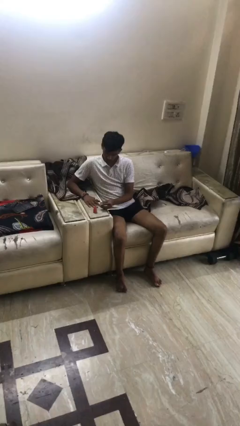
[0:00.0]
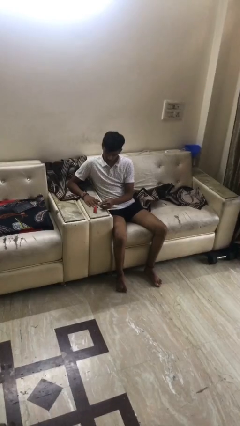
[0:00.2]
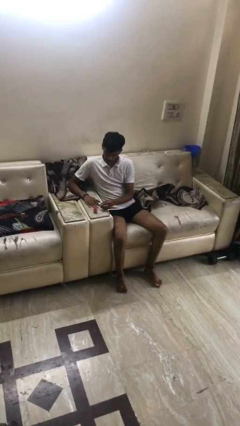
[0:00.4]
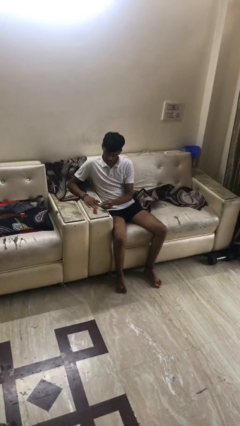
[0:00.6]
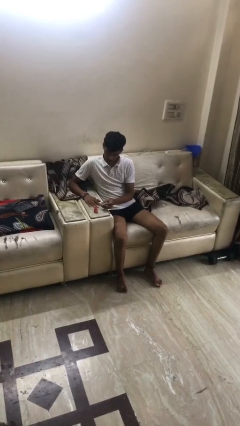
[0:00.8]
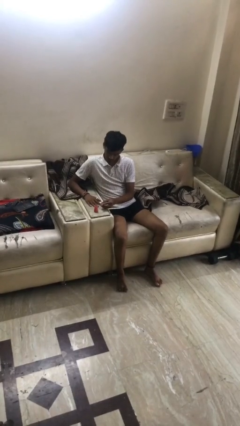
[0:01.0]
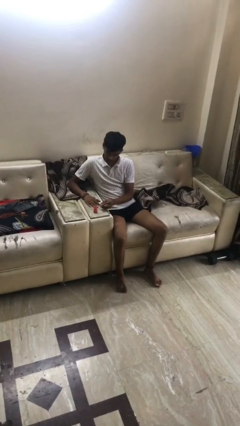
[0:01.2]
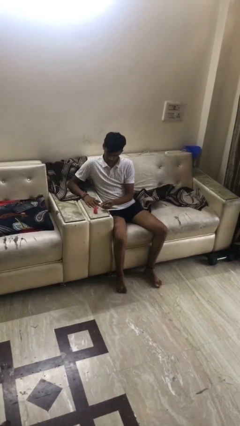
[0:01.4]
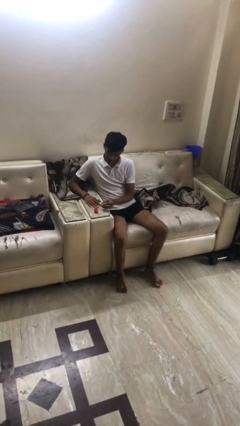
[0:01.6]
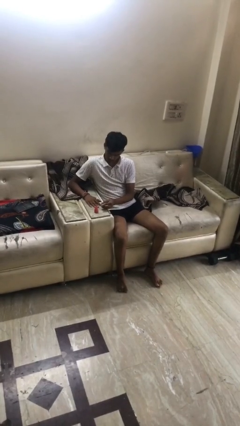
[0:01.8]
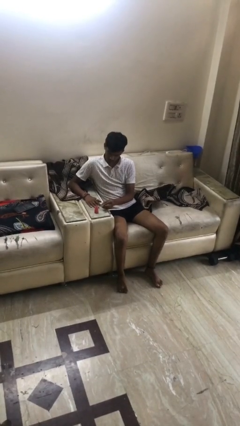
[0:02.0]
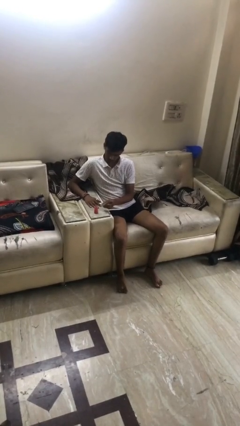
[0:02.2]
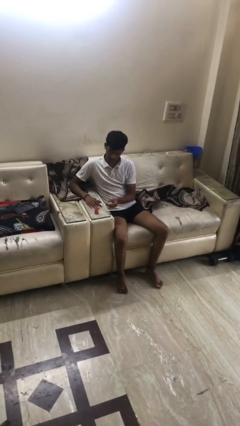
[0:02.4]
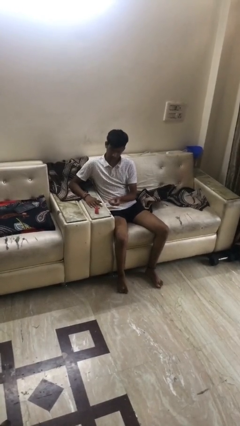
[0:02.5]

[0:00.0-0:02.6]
person paints fingernails

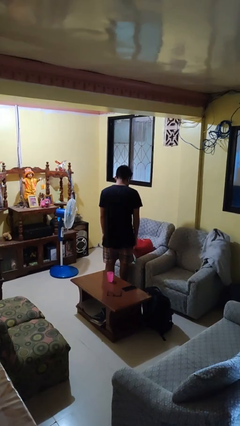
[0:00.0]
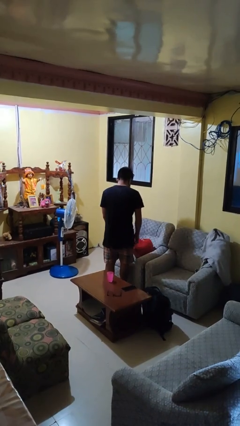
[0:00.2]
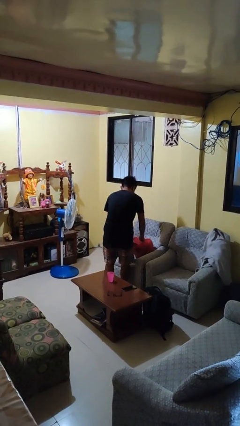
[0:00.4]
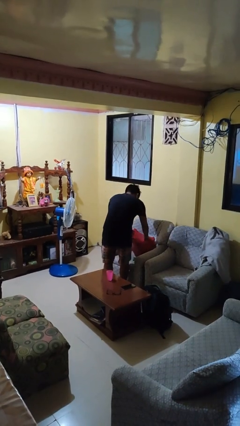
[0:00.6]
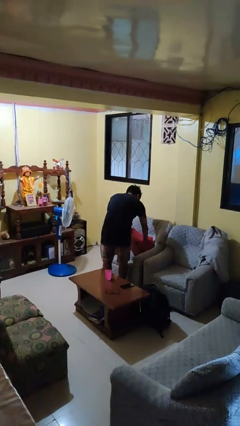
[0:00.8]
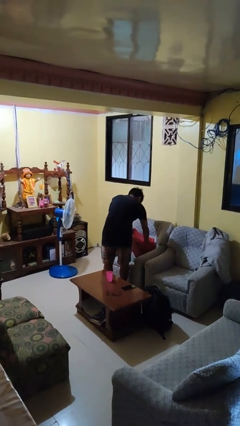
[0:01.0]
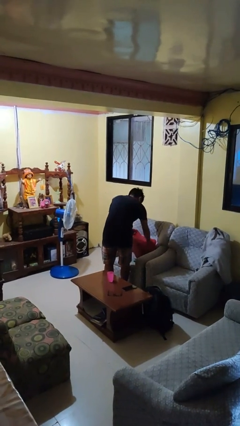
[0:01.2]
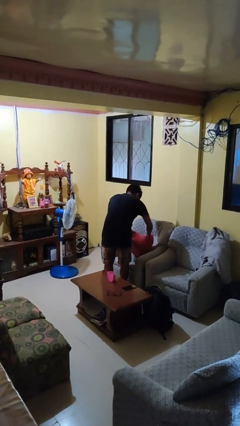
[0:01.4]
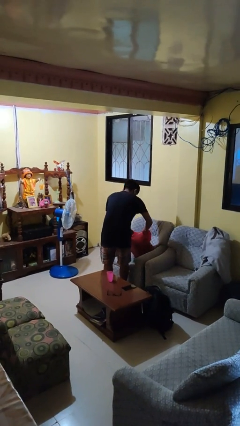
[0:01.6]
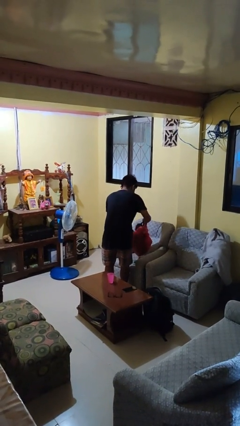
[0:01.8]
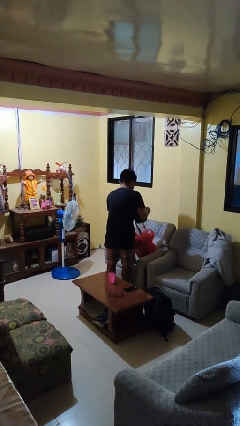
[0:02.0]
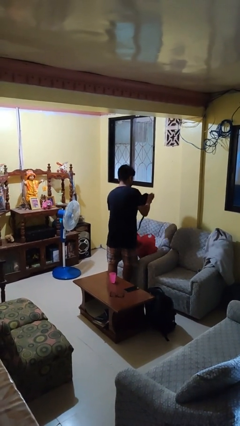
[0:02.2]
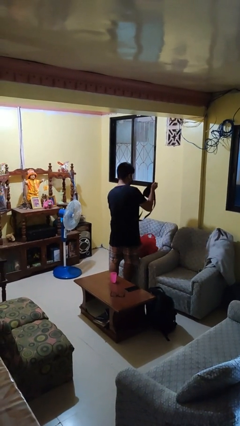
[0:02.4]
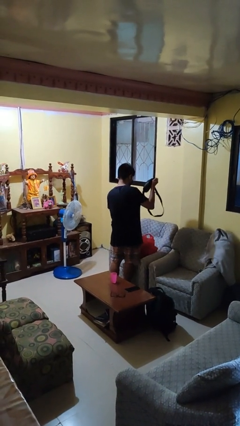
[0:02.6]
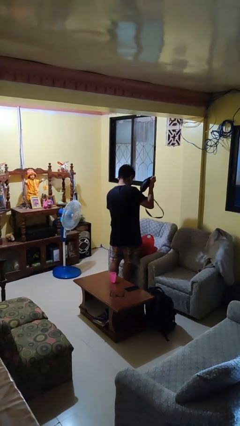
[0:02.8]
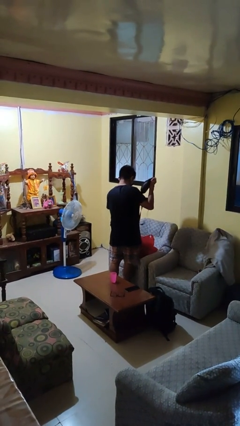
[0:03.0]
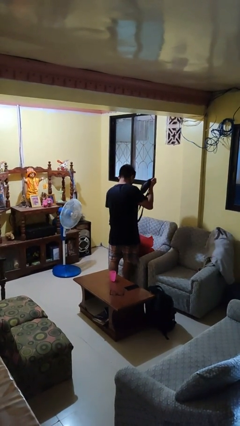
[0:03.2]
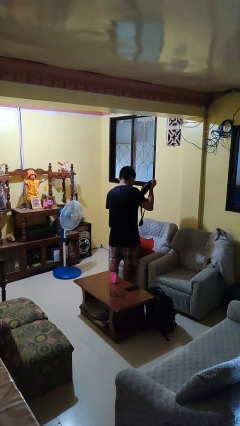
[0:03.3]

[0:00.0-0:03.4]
person takes object from bag

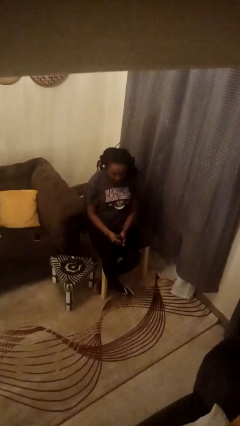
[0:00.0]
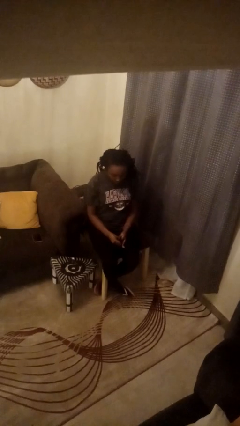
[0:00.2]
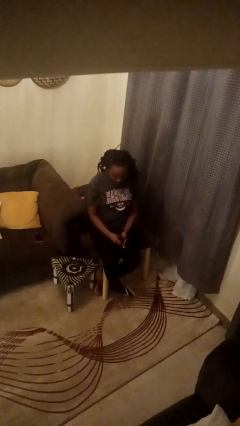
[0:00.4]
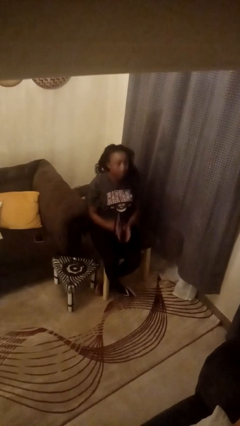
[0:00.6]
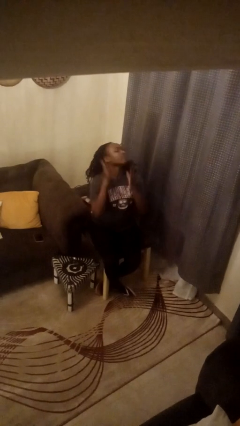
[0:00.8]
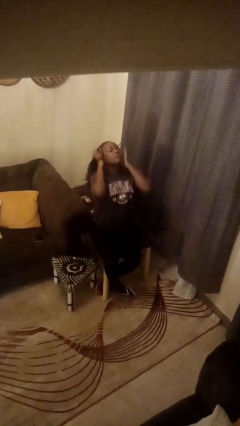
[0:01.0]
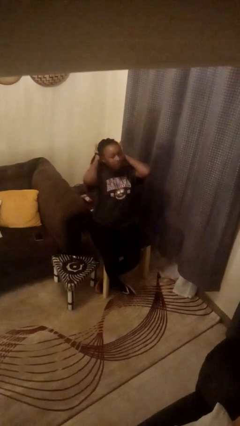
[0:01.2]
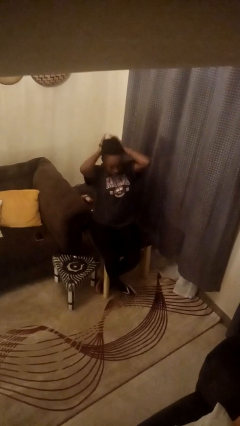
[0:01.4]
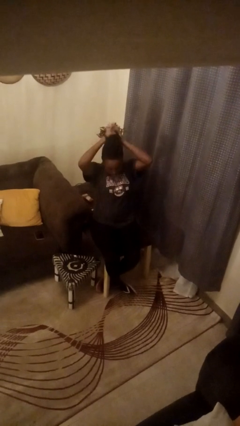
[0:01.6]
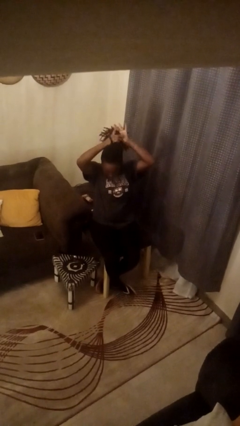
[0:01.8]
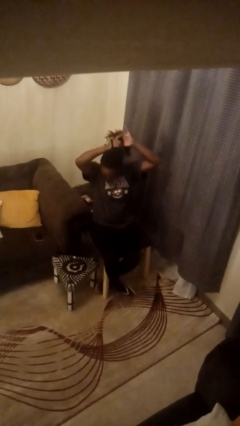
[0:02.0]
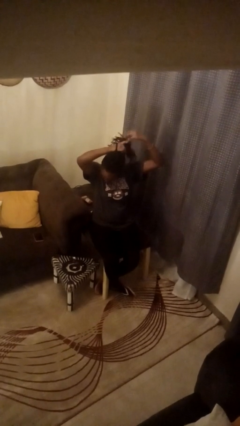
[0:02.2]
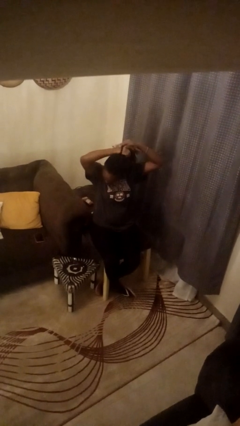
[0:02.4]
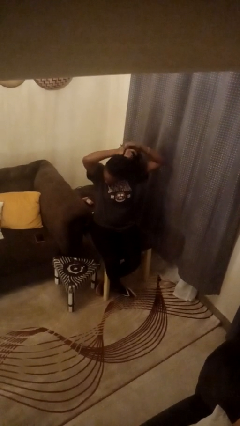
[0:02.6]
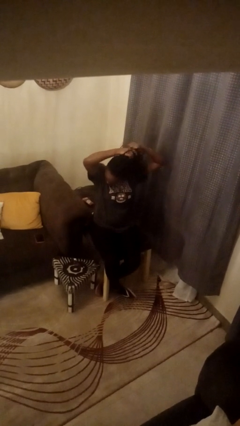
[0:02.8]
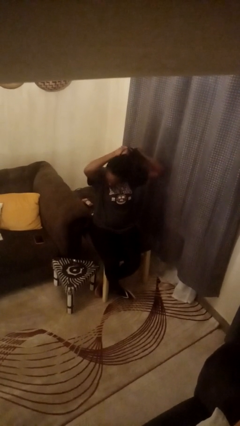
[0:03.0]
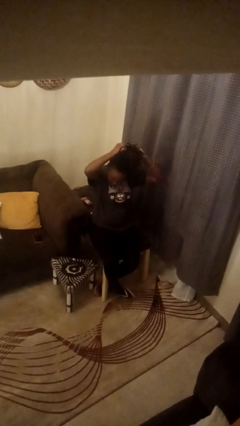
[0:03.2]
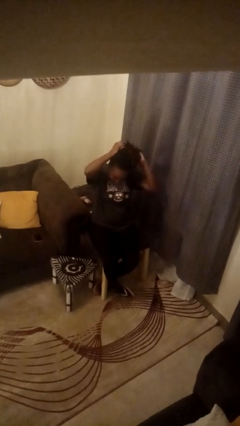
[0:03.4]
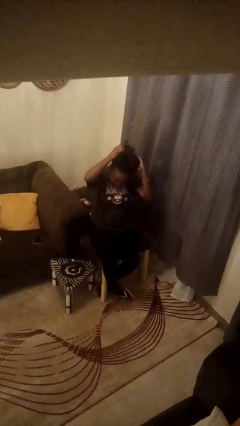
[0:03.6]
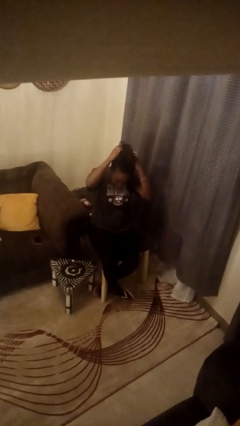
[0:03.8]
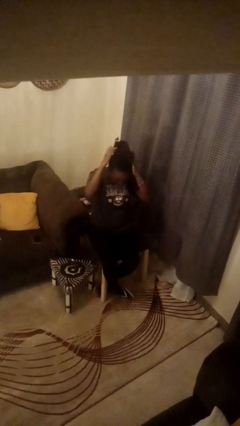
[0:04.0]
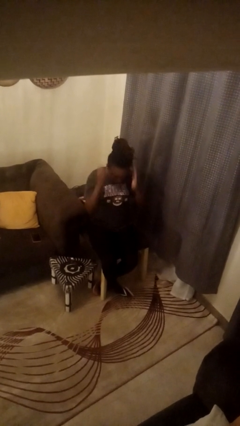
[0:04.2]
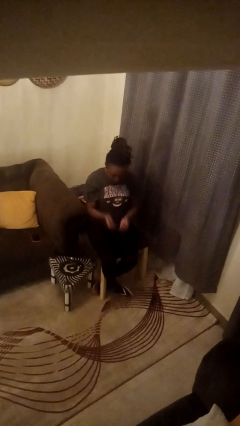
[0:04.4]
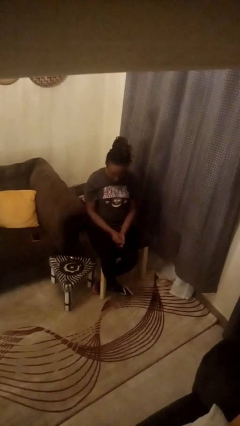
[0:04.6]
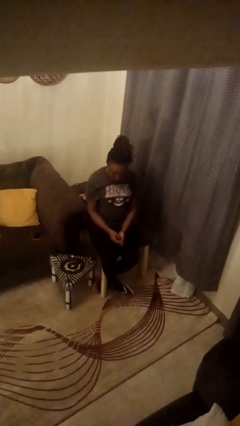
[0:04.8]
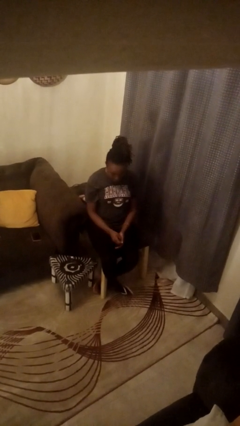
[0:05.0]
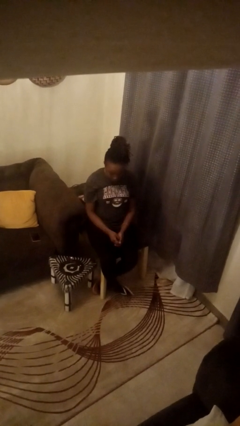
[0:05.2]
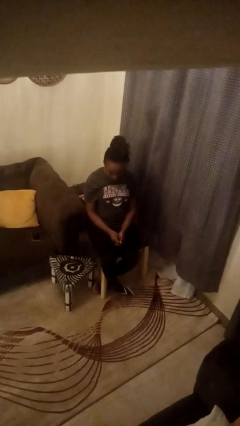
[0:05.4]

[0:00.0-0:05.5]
person puts hair in ponytail

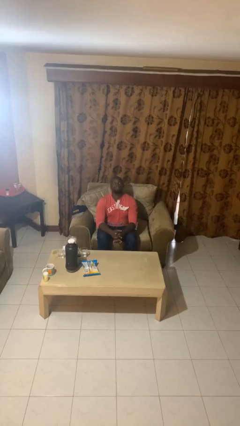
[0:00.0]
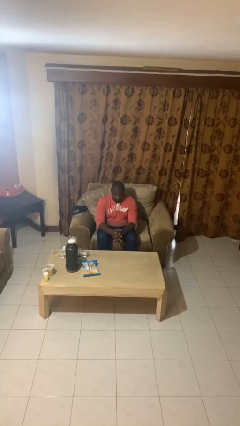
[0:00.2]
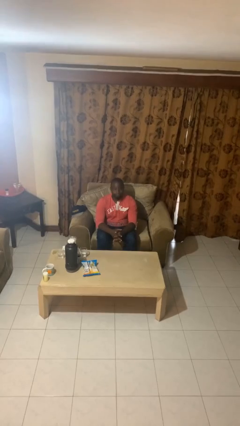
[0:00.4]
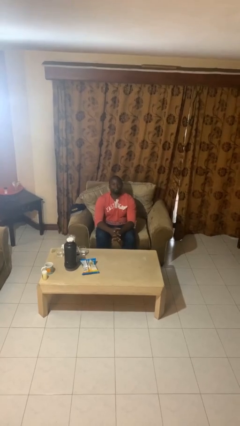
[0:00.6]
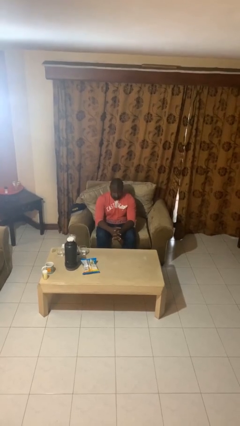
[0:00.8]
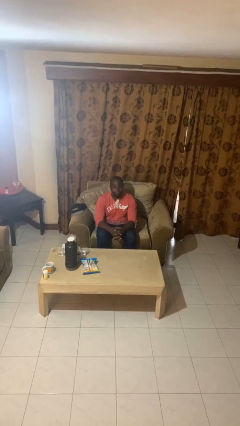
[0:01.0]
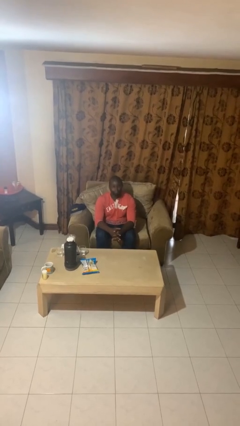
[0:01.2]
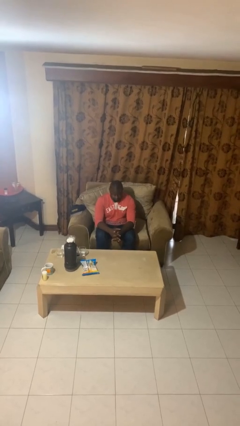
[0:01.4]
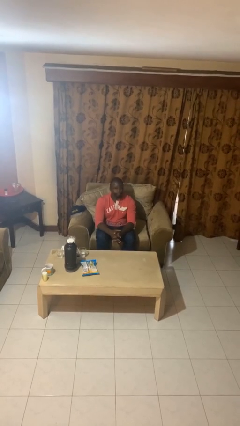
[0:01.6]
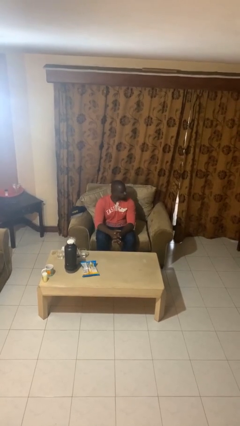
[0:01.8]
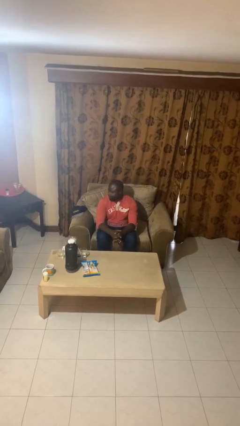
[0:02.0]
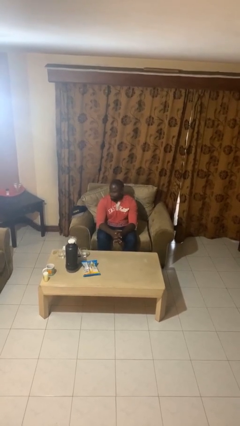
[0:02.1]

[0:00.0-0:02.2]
person nods head

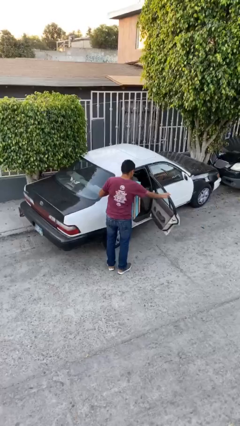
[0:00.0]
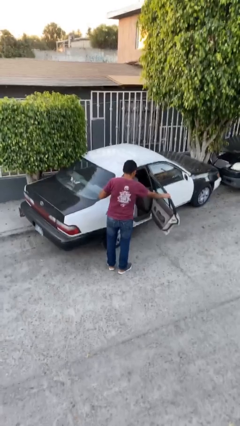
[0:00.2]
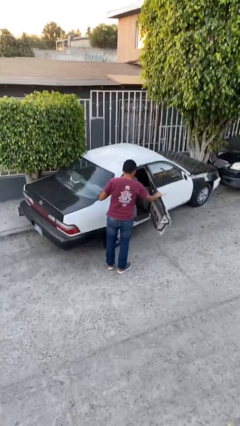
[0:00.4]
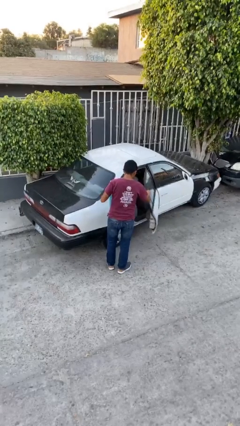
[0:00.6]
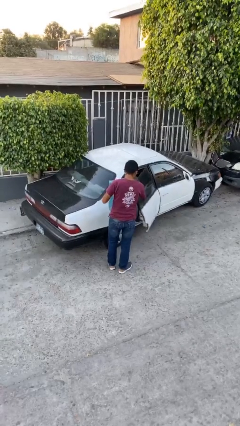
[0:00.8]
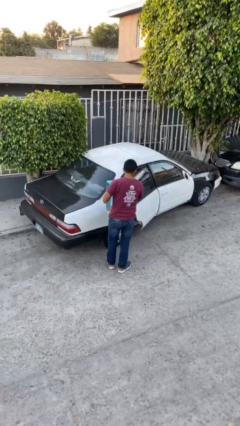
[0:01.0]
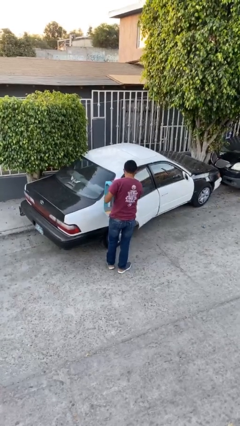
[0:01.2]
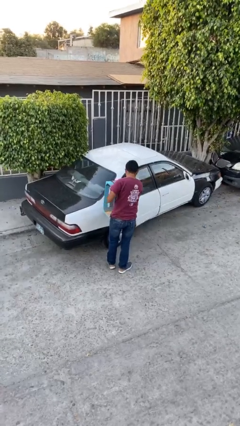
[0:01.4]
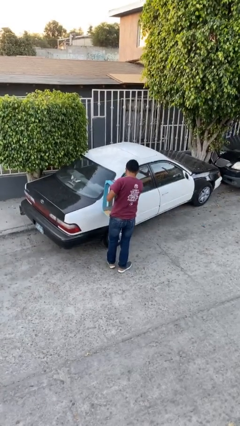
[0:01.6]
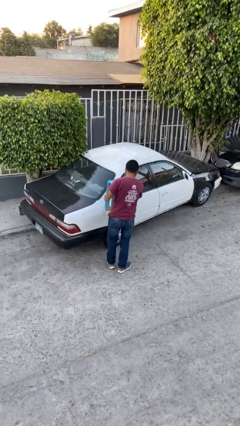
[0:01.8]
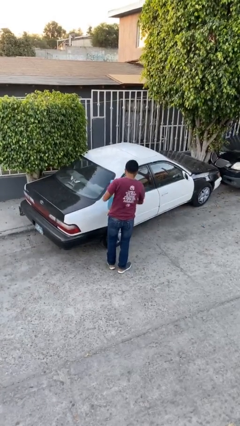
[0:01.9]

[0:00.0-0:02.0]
person closes car door

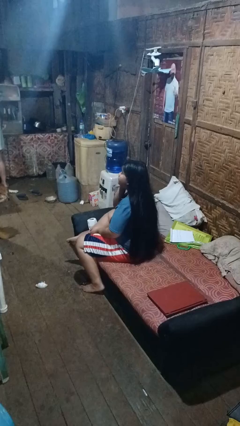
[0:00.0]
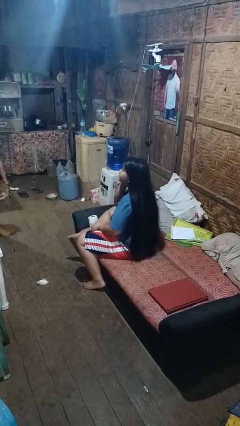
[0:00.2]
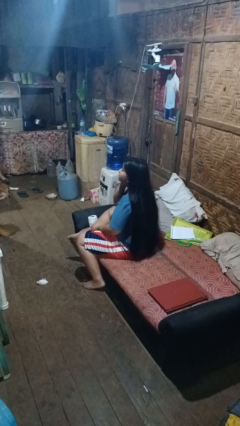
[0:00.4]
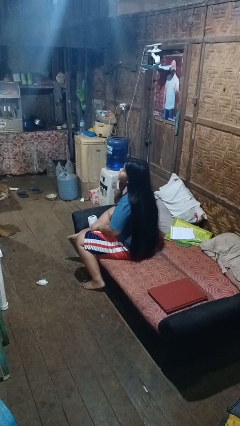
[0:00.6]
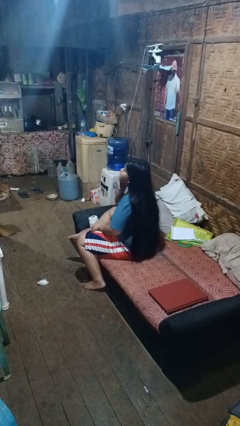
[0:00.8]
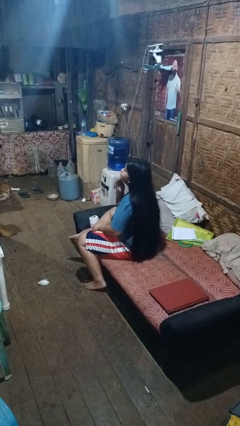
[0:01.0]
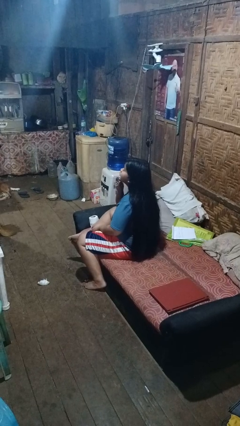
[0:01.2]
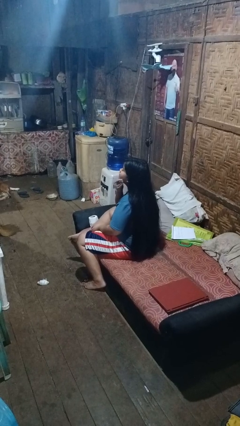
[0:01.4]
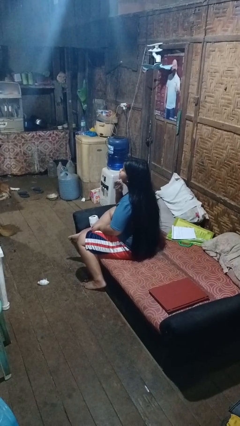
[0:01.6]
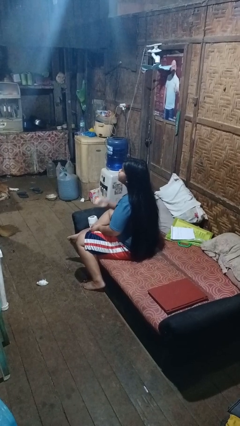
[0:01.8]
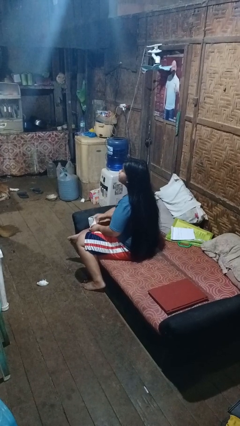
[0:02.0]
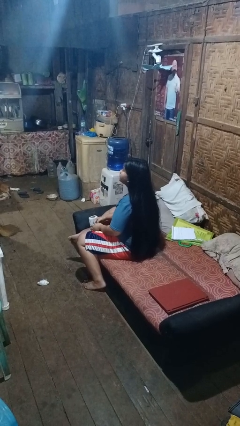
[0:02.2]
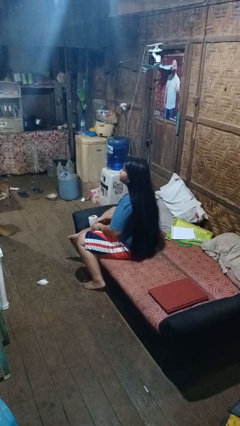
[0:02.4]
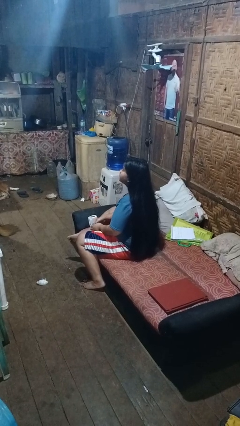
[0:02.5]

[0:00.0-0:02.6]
person wipes mouth with napkin
